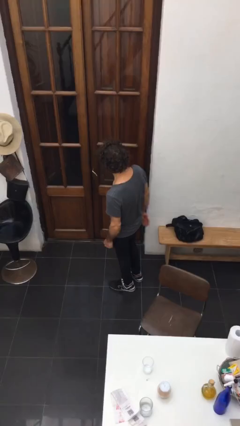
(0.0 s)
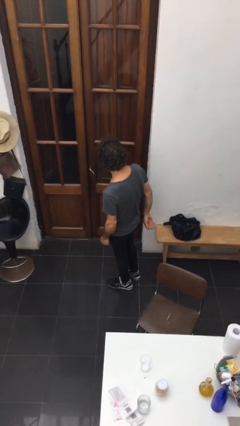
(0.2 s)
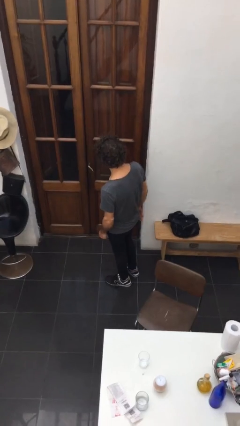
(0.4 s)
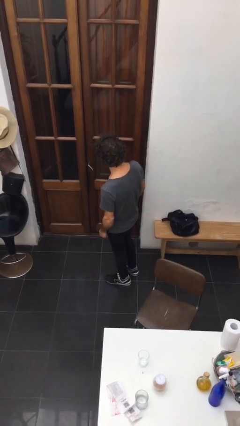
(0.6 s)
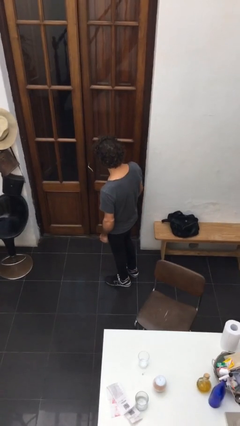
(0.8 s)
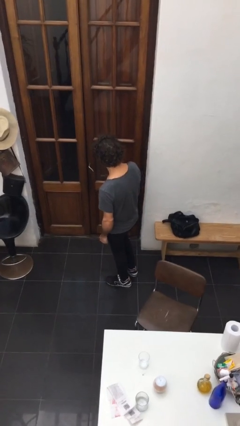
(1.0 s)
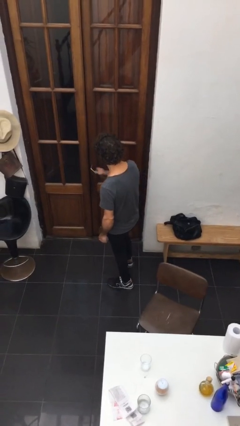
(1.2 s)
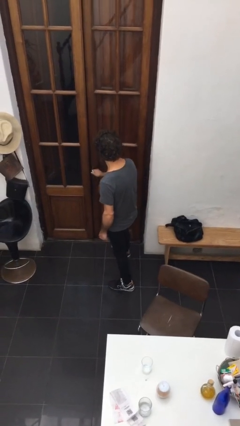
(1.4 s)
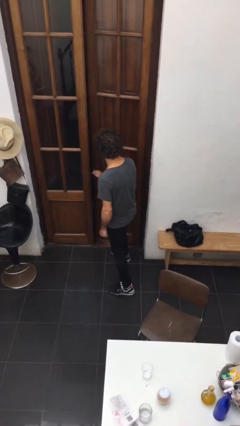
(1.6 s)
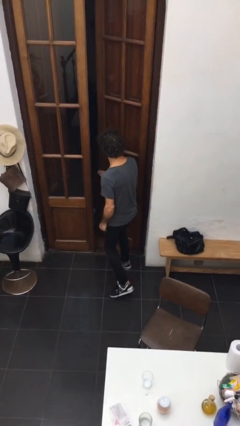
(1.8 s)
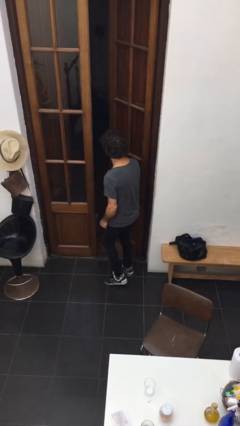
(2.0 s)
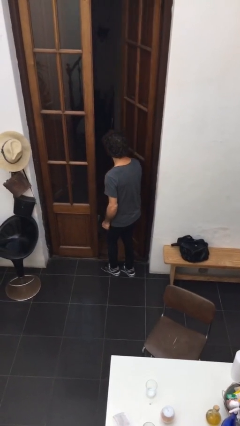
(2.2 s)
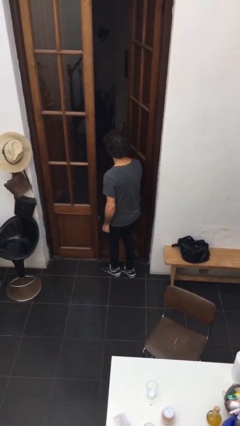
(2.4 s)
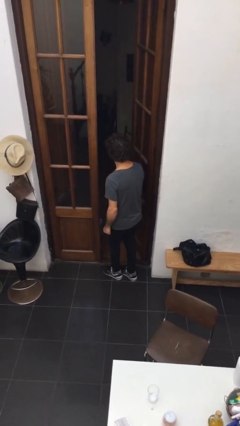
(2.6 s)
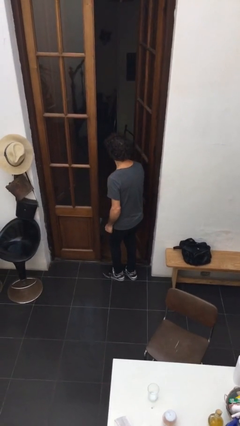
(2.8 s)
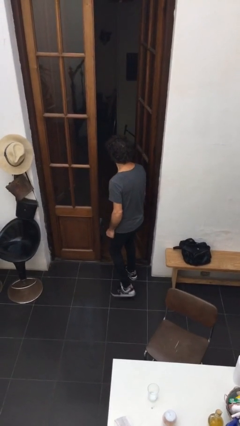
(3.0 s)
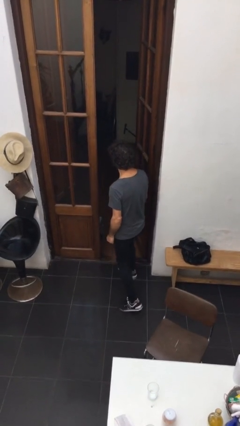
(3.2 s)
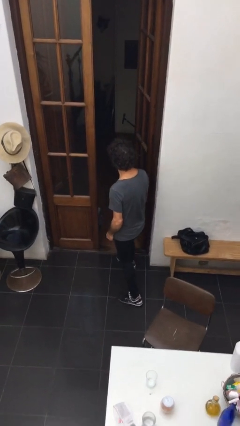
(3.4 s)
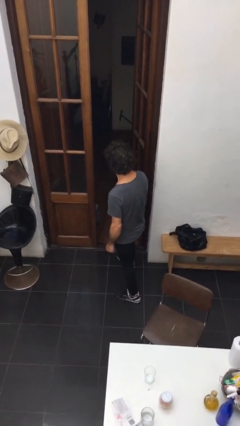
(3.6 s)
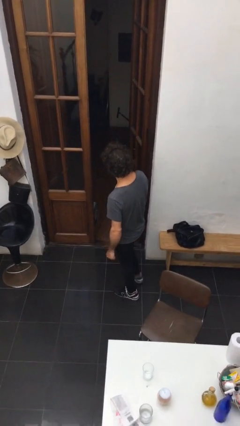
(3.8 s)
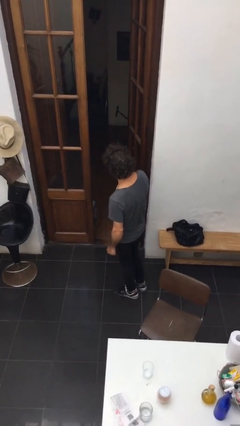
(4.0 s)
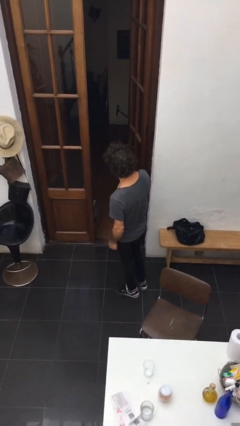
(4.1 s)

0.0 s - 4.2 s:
person opens facility door

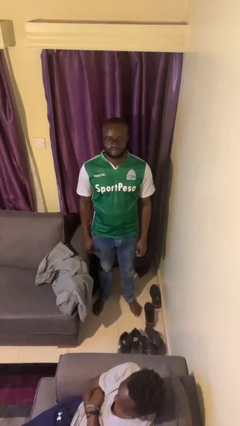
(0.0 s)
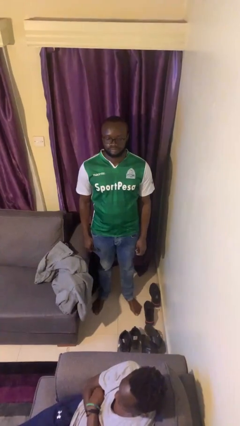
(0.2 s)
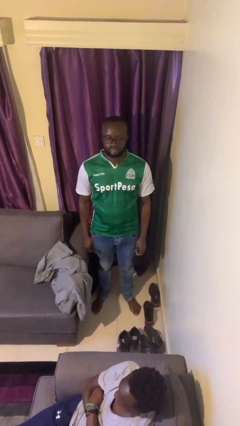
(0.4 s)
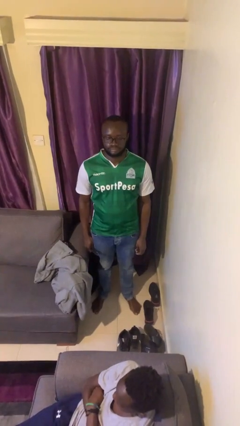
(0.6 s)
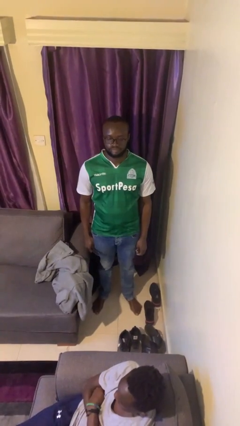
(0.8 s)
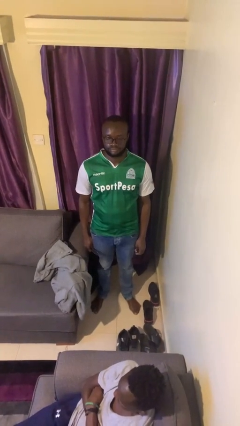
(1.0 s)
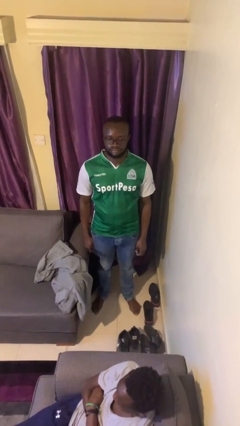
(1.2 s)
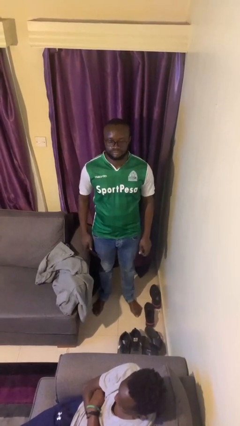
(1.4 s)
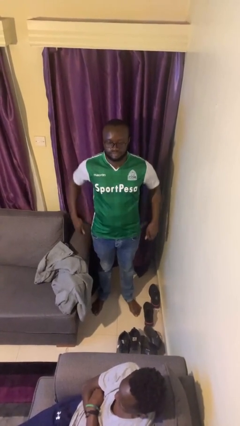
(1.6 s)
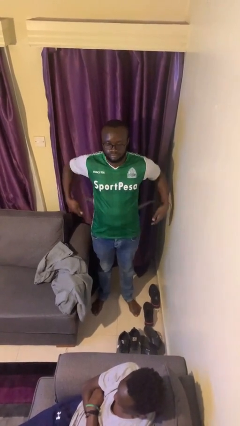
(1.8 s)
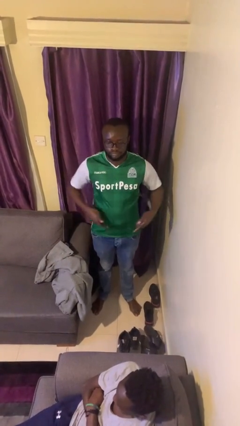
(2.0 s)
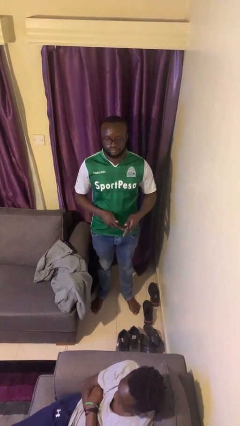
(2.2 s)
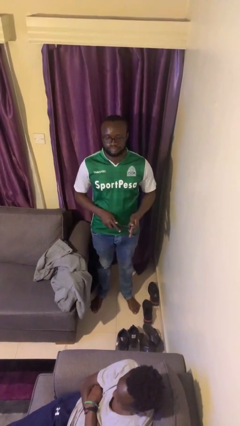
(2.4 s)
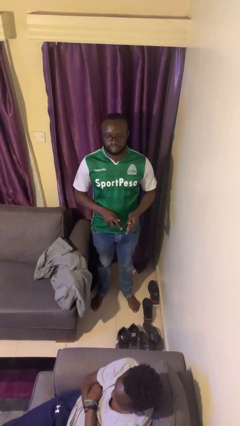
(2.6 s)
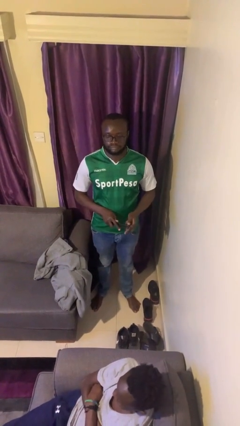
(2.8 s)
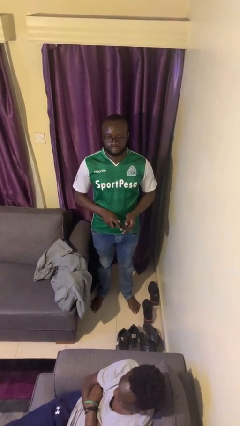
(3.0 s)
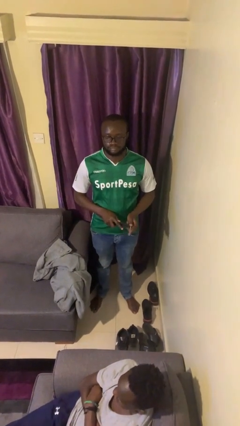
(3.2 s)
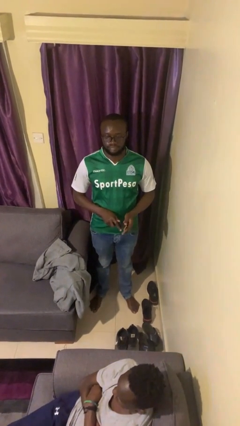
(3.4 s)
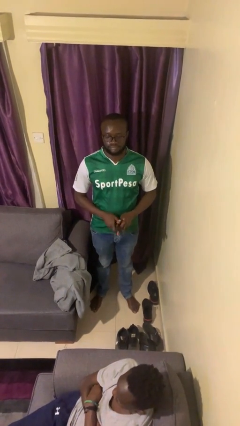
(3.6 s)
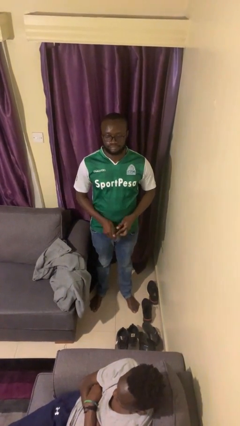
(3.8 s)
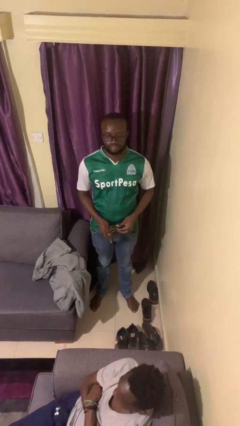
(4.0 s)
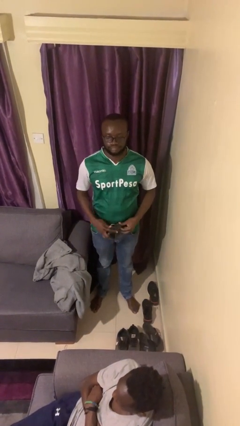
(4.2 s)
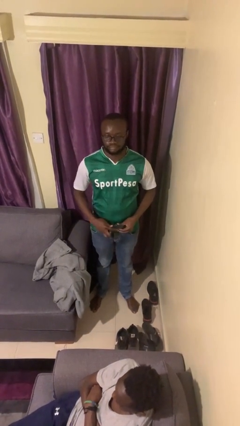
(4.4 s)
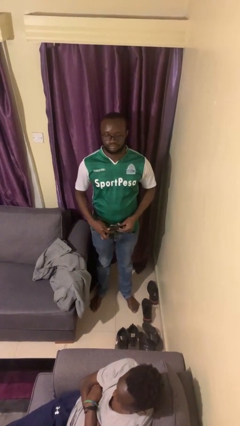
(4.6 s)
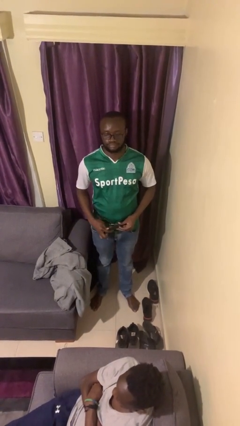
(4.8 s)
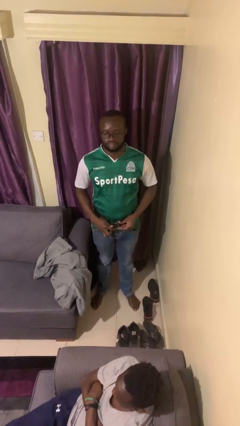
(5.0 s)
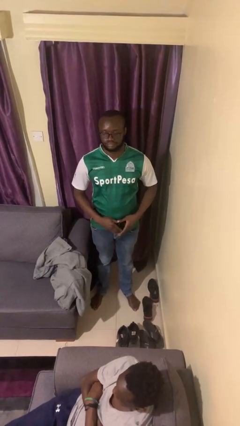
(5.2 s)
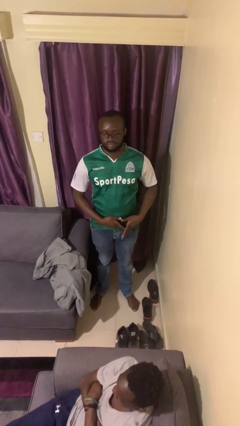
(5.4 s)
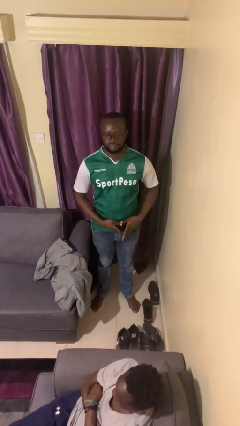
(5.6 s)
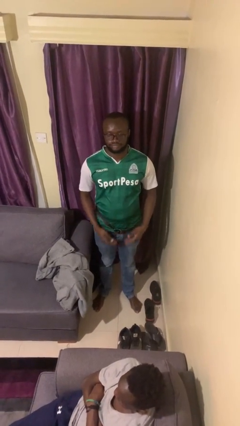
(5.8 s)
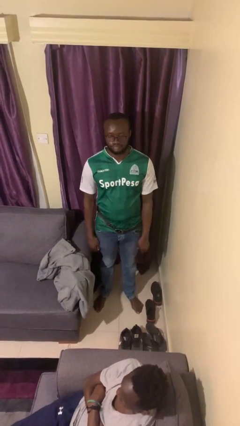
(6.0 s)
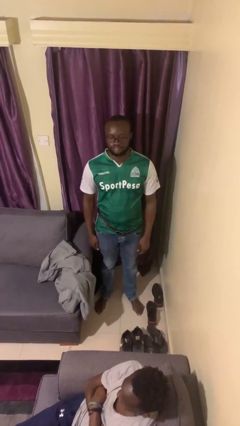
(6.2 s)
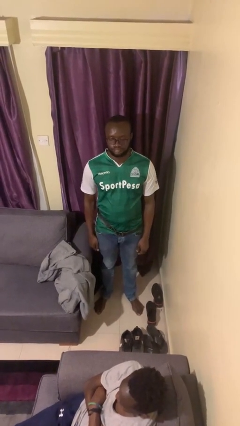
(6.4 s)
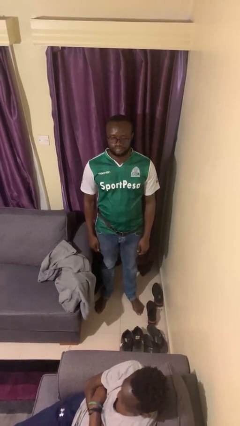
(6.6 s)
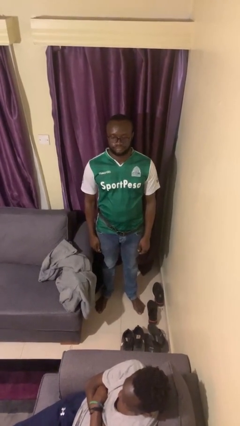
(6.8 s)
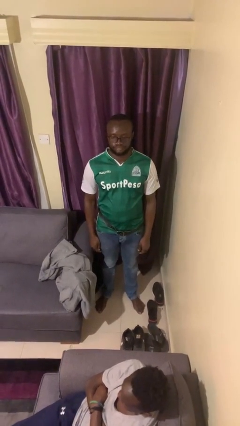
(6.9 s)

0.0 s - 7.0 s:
person puts on belt

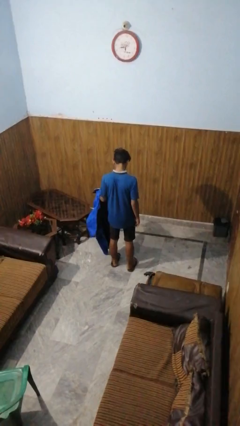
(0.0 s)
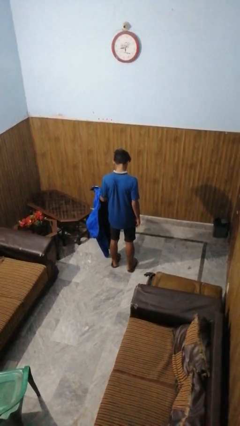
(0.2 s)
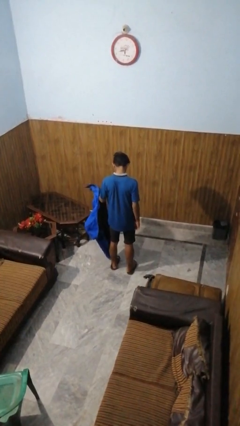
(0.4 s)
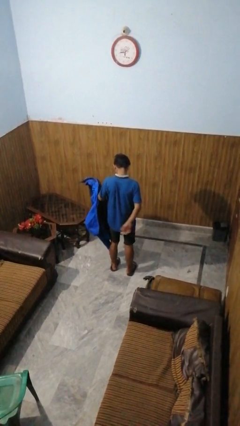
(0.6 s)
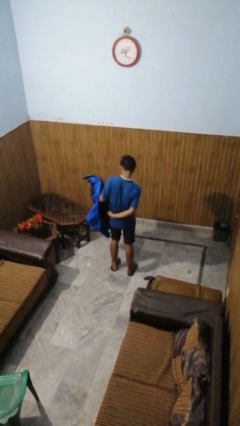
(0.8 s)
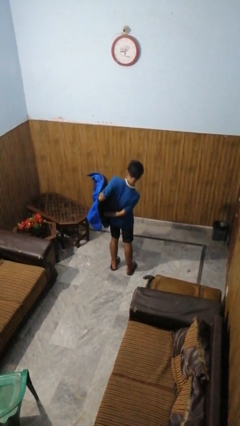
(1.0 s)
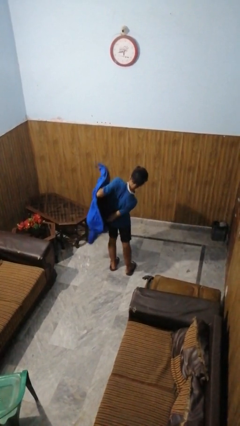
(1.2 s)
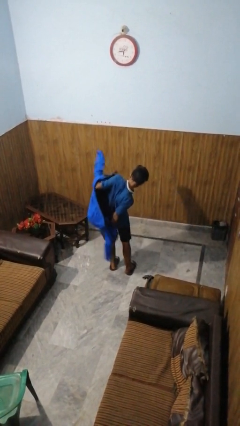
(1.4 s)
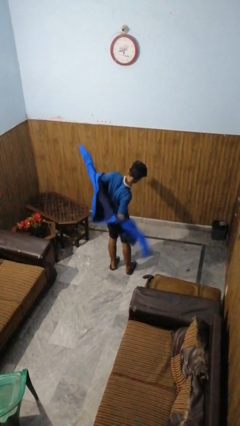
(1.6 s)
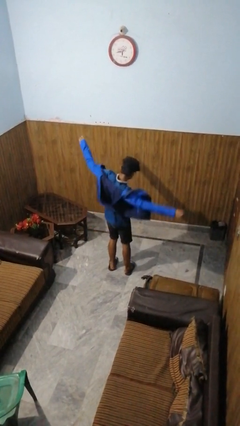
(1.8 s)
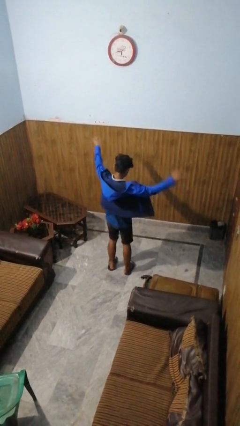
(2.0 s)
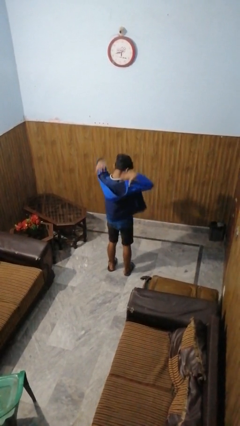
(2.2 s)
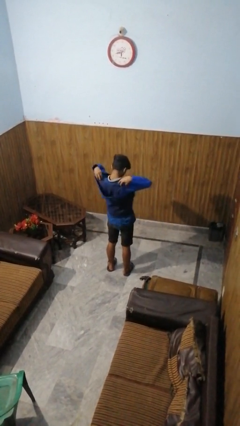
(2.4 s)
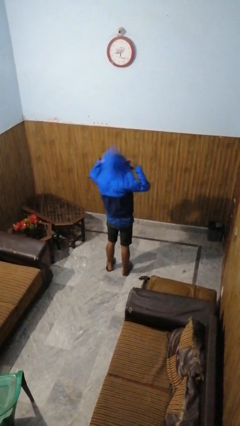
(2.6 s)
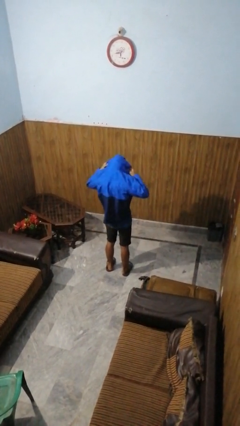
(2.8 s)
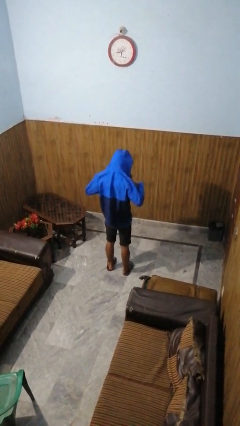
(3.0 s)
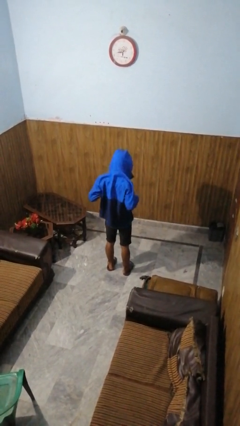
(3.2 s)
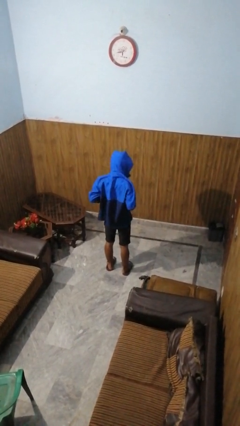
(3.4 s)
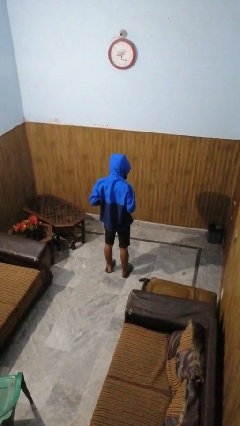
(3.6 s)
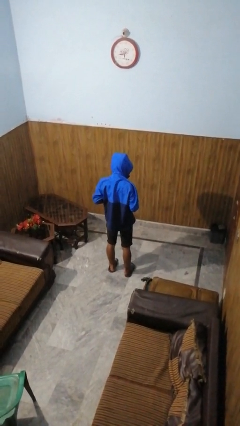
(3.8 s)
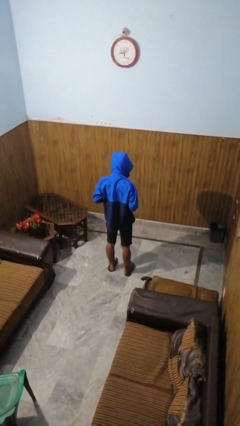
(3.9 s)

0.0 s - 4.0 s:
person puts on hoodie

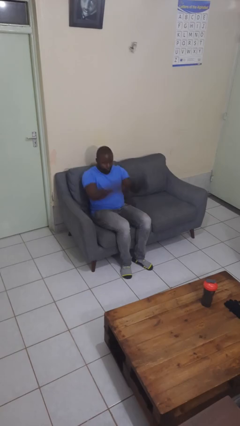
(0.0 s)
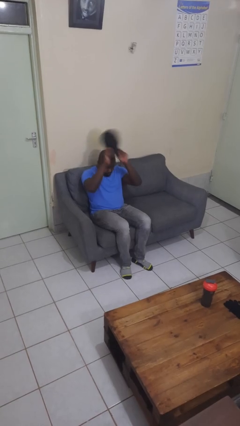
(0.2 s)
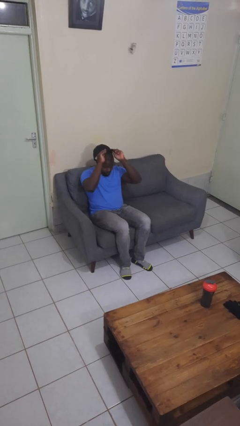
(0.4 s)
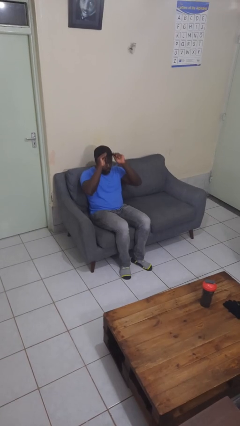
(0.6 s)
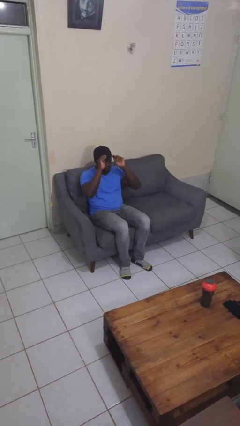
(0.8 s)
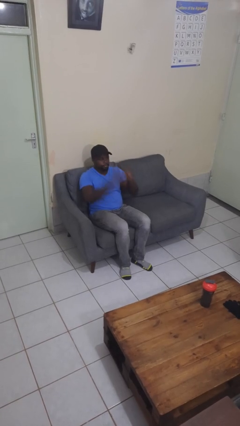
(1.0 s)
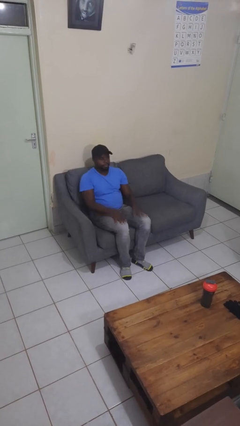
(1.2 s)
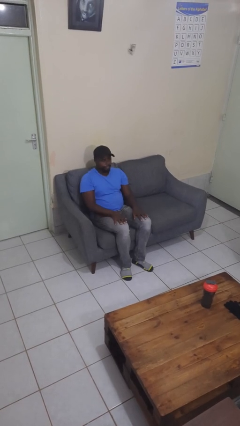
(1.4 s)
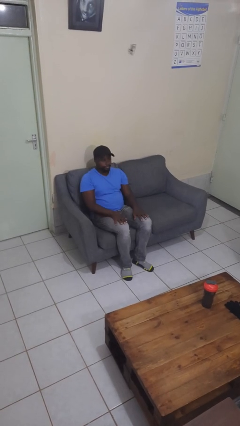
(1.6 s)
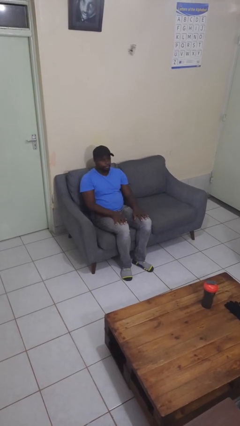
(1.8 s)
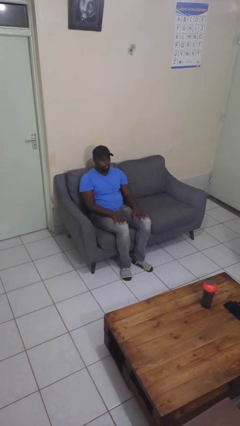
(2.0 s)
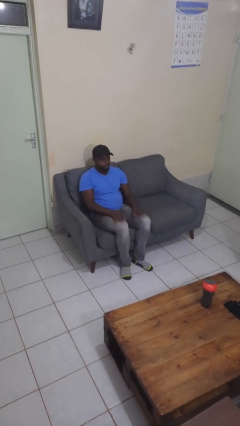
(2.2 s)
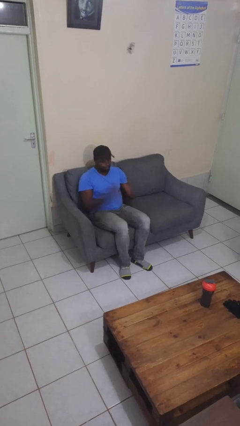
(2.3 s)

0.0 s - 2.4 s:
person puts on hat
